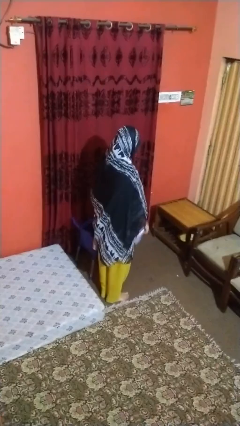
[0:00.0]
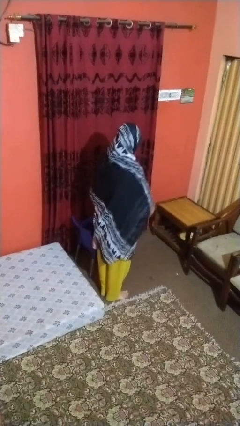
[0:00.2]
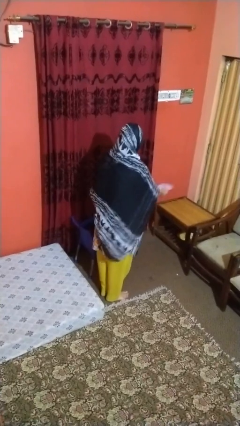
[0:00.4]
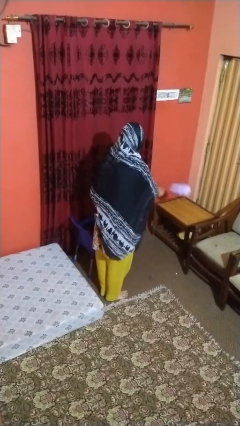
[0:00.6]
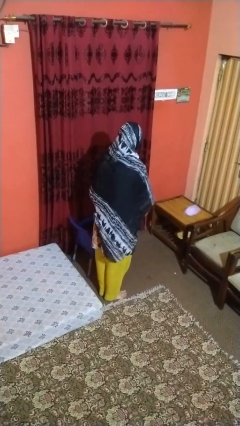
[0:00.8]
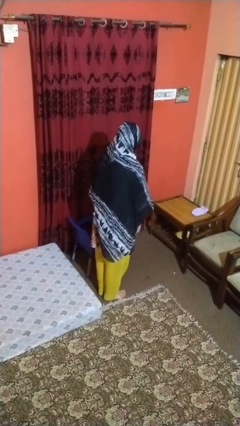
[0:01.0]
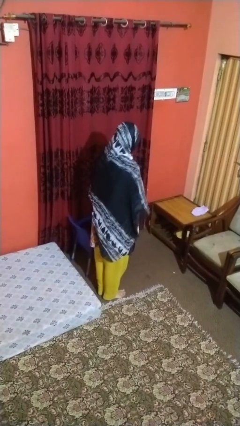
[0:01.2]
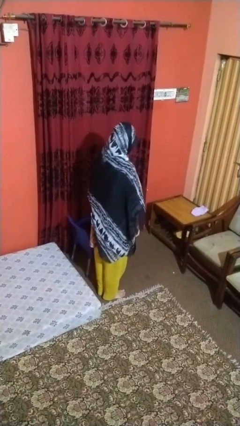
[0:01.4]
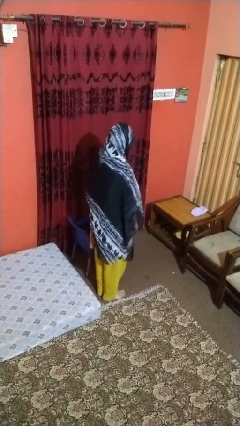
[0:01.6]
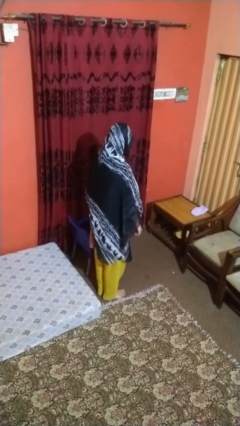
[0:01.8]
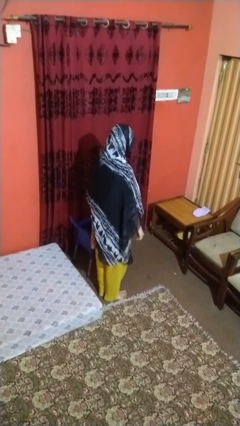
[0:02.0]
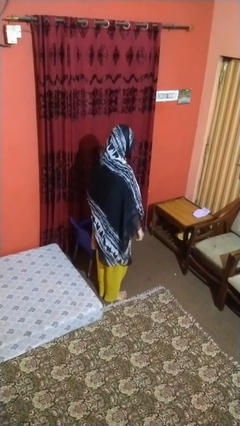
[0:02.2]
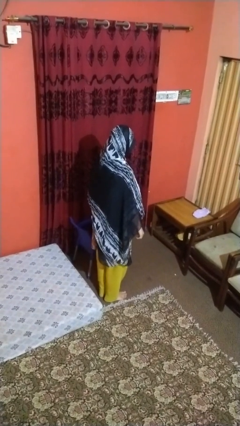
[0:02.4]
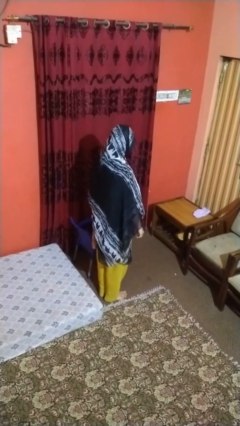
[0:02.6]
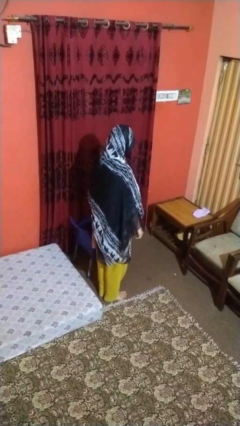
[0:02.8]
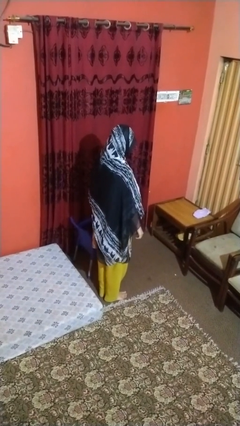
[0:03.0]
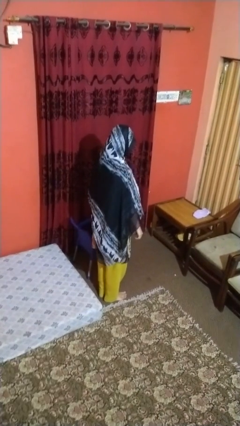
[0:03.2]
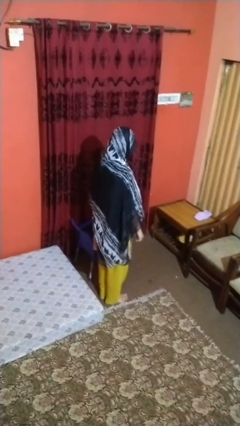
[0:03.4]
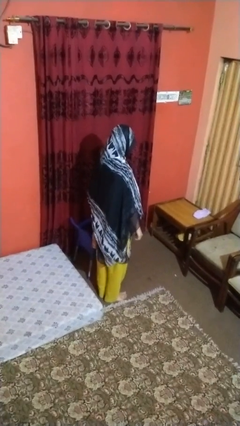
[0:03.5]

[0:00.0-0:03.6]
person throws object on table

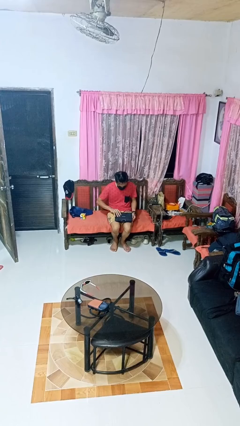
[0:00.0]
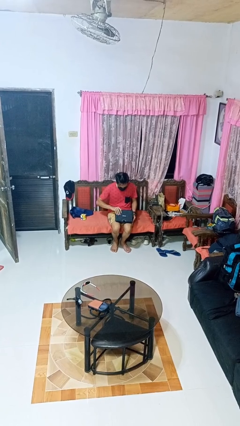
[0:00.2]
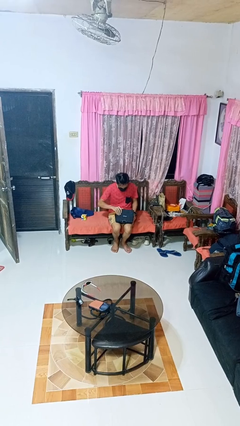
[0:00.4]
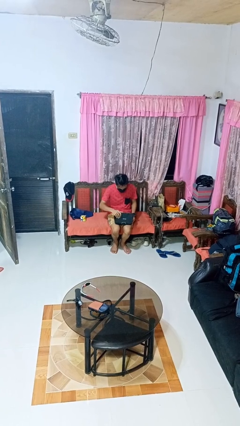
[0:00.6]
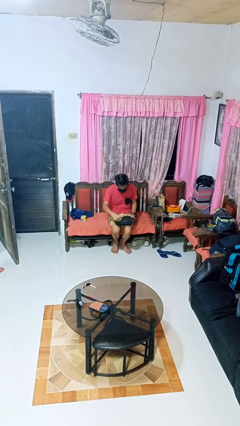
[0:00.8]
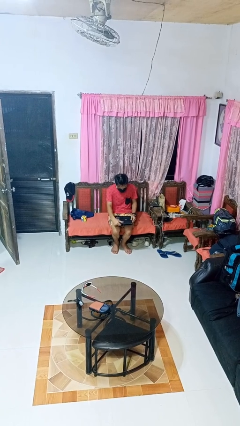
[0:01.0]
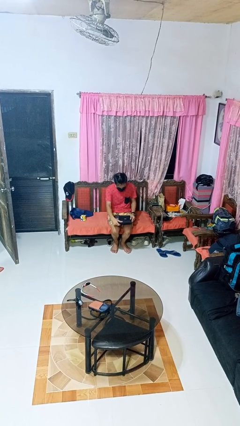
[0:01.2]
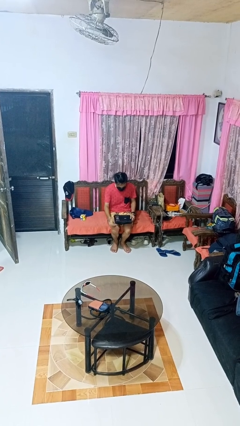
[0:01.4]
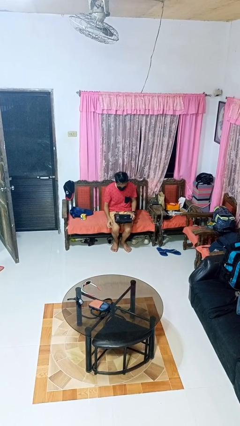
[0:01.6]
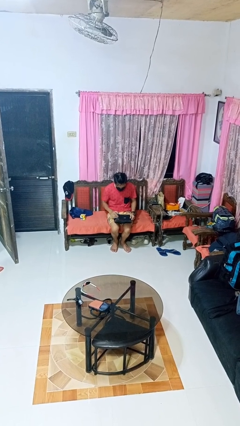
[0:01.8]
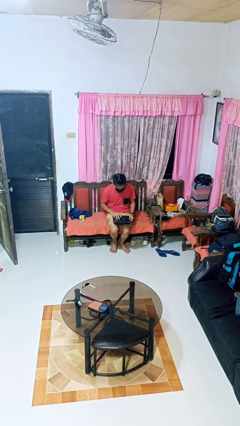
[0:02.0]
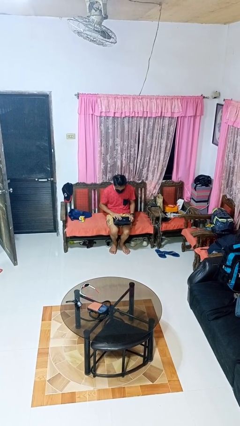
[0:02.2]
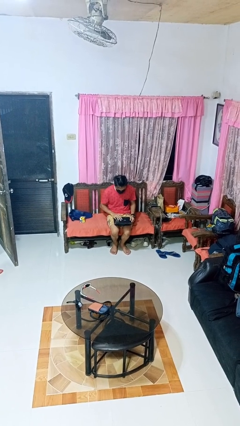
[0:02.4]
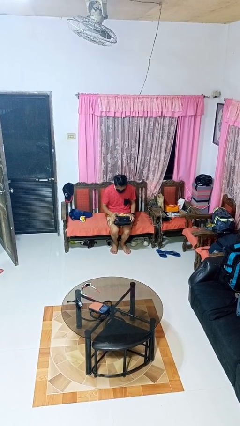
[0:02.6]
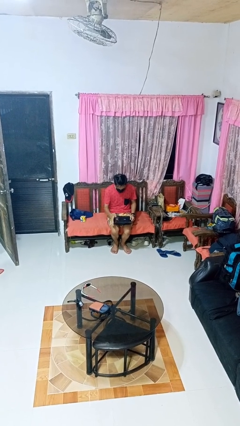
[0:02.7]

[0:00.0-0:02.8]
person opens laptop

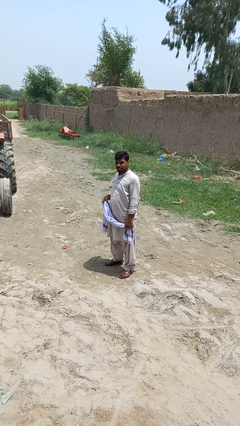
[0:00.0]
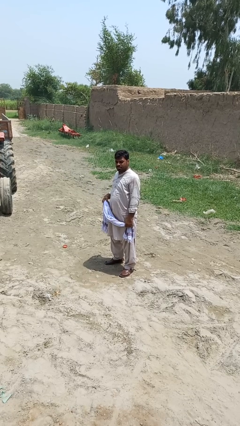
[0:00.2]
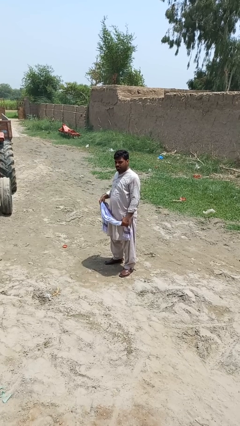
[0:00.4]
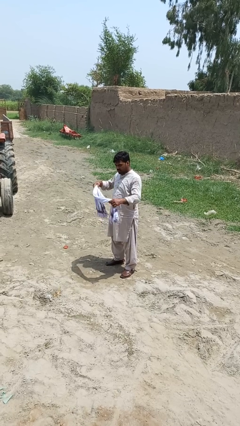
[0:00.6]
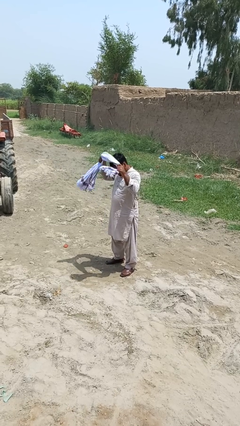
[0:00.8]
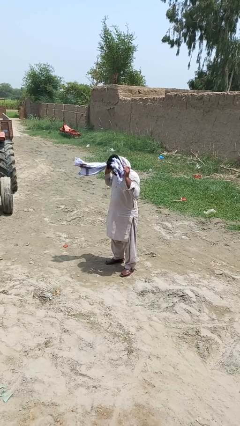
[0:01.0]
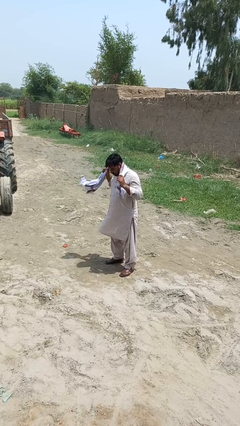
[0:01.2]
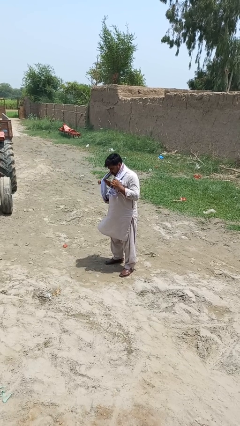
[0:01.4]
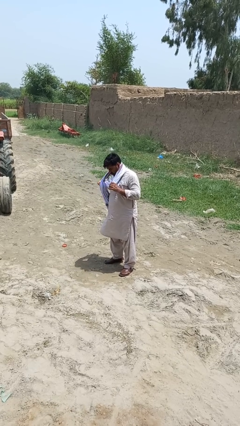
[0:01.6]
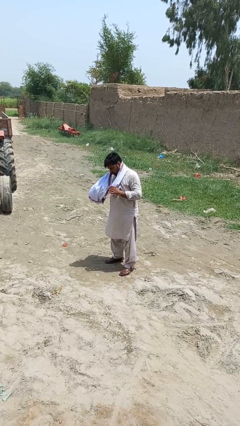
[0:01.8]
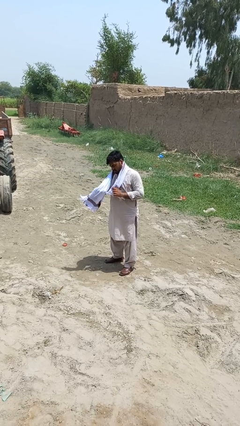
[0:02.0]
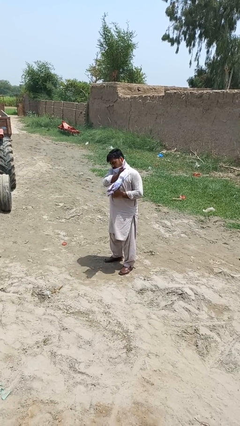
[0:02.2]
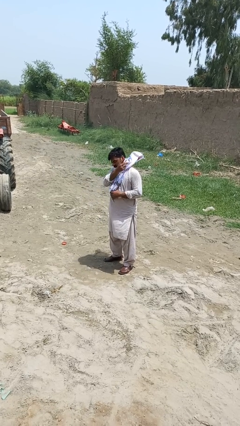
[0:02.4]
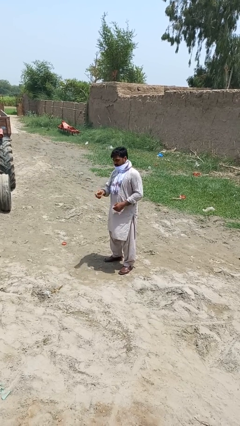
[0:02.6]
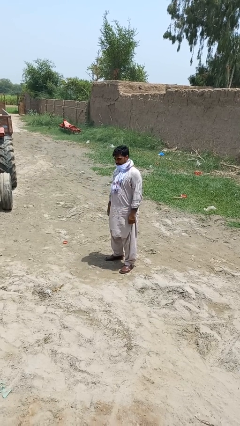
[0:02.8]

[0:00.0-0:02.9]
person puts on scarf

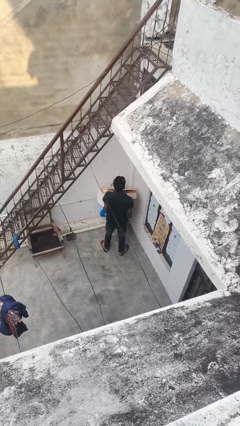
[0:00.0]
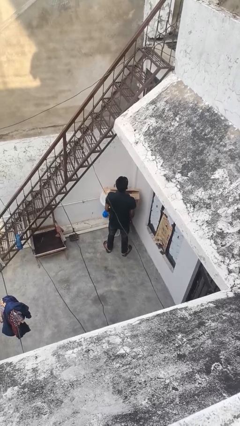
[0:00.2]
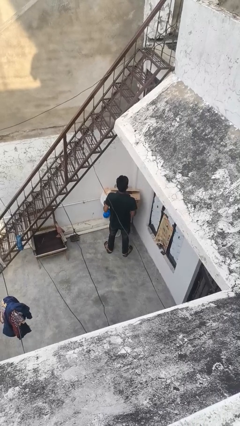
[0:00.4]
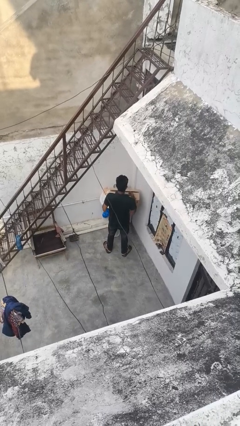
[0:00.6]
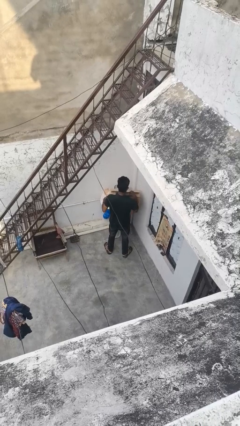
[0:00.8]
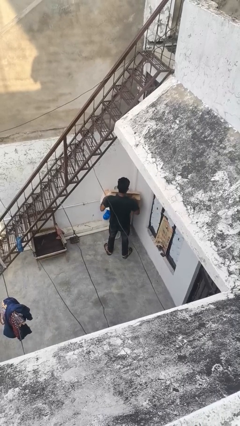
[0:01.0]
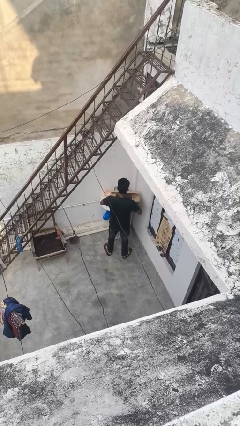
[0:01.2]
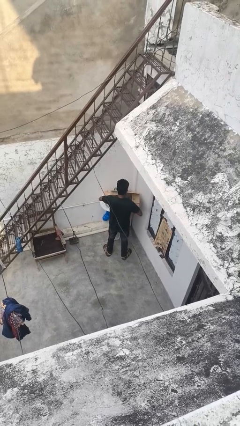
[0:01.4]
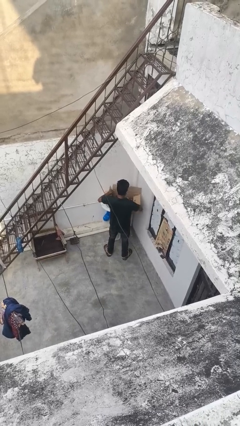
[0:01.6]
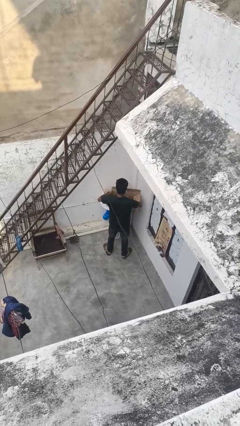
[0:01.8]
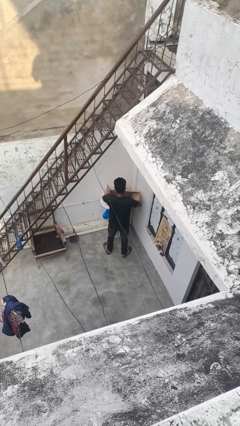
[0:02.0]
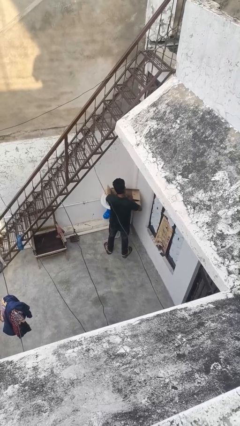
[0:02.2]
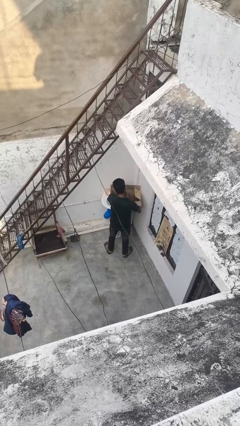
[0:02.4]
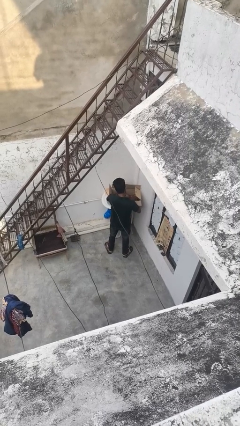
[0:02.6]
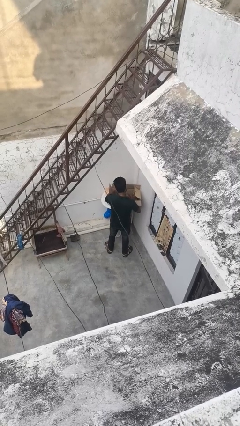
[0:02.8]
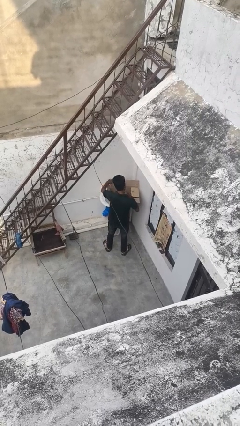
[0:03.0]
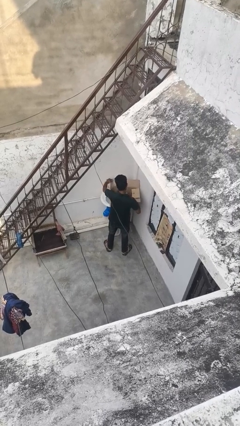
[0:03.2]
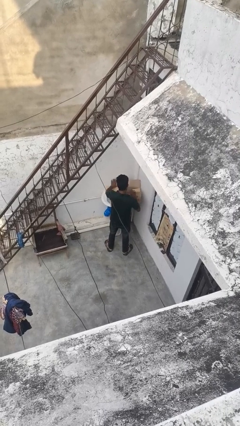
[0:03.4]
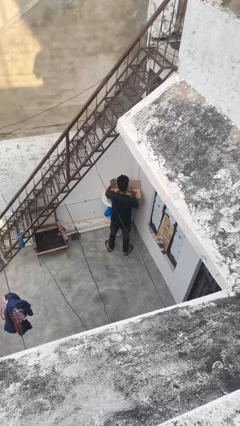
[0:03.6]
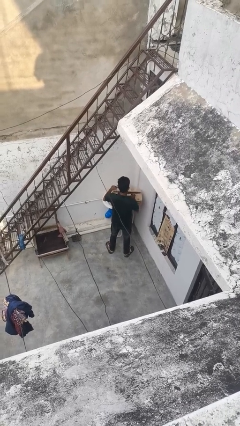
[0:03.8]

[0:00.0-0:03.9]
person searches in box

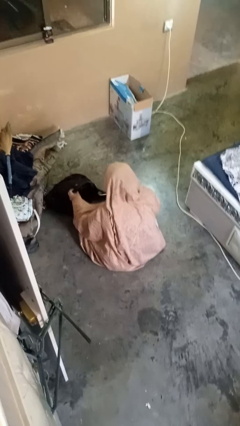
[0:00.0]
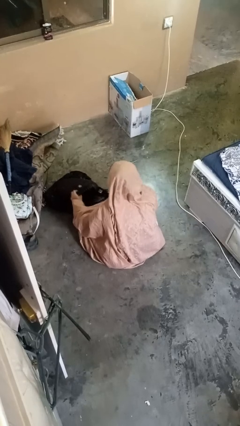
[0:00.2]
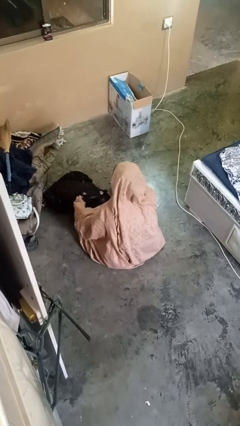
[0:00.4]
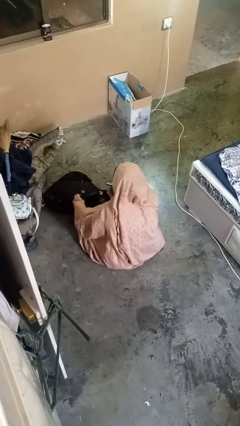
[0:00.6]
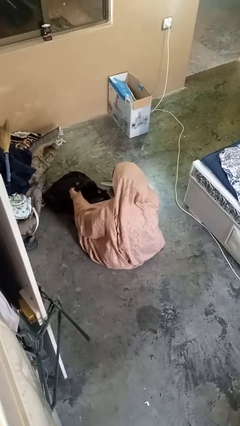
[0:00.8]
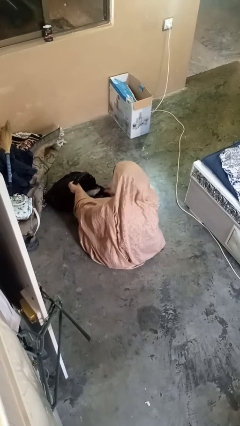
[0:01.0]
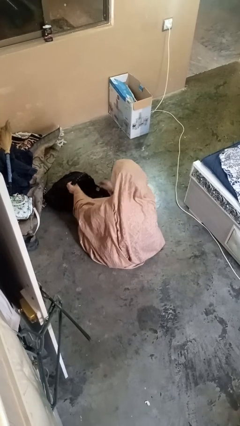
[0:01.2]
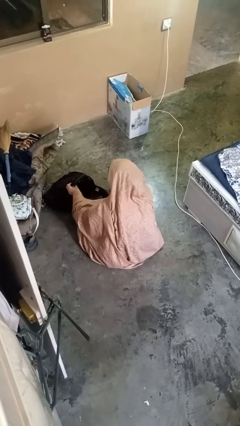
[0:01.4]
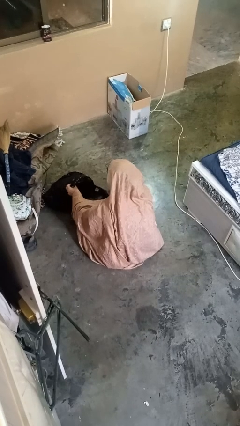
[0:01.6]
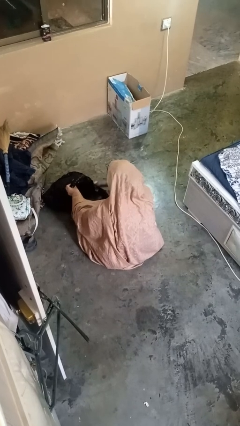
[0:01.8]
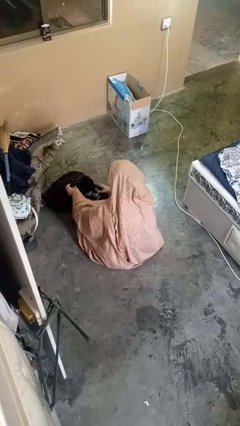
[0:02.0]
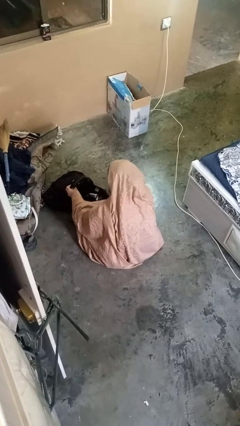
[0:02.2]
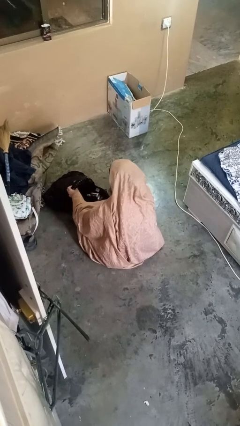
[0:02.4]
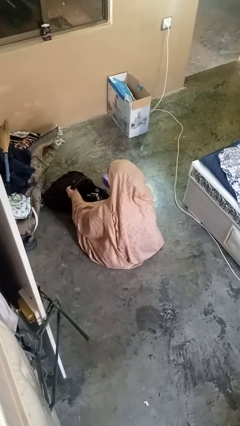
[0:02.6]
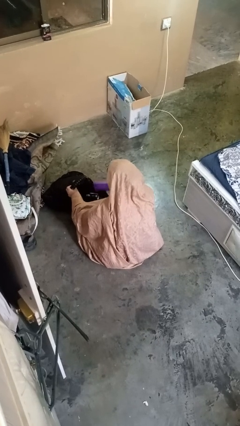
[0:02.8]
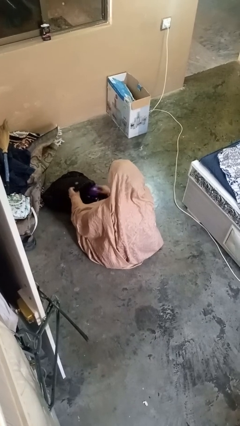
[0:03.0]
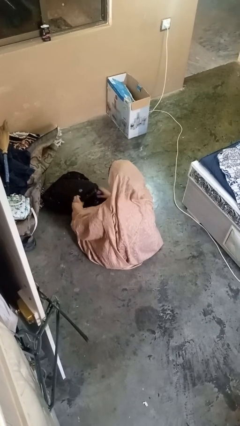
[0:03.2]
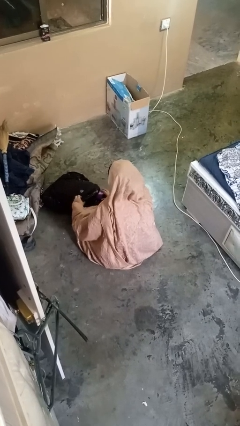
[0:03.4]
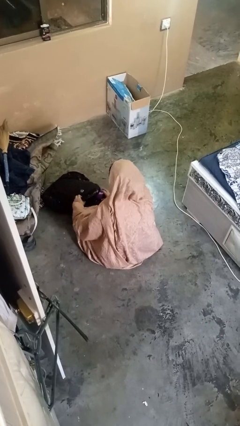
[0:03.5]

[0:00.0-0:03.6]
person puts object into backpack

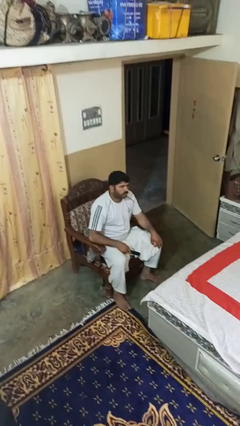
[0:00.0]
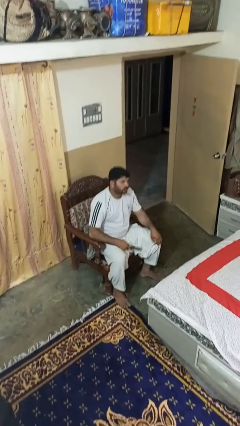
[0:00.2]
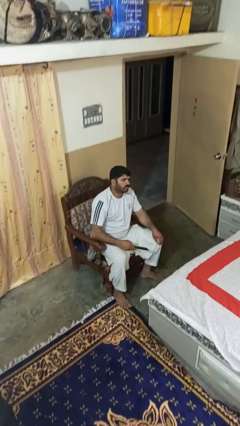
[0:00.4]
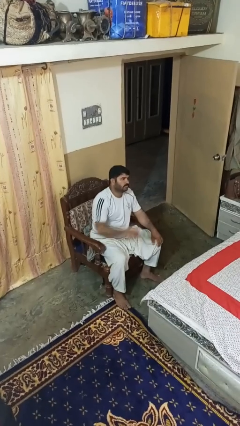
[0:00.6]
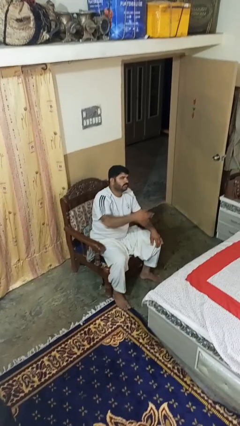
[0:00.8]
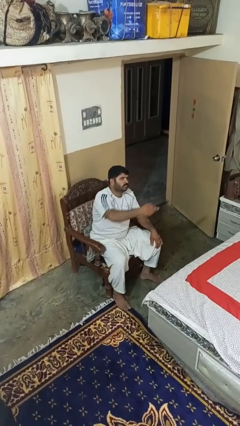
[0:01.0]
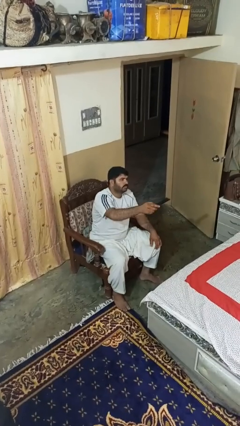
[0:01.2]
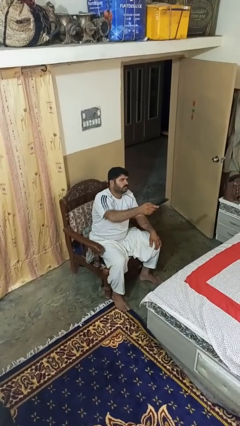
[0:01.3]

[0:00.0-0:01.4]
person uses television remote
